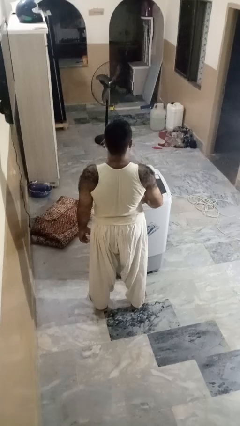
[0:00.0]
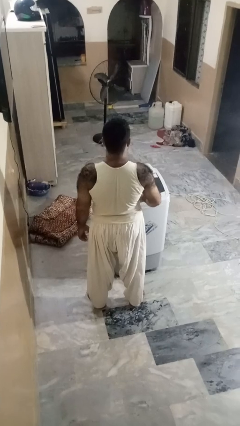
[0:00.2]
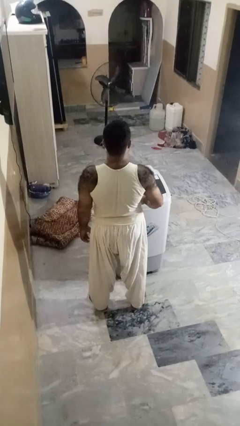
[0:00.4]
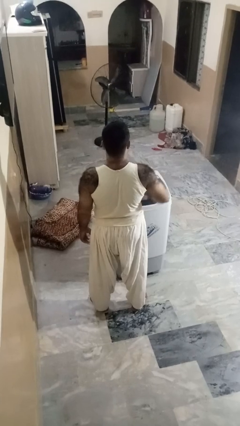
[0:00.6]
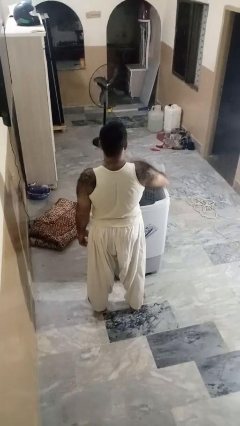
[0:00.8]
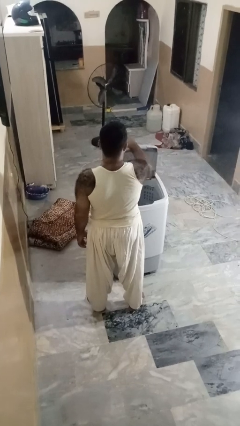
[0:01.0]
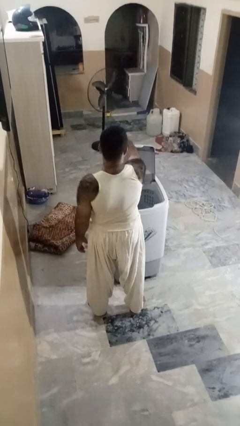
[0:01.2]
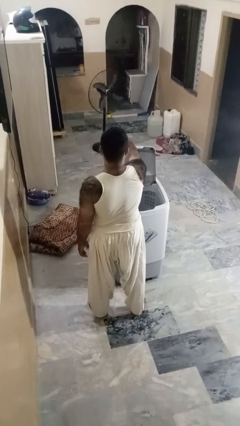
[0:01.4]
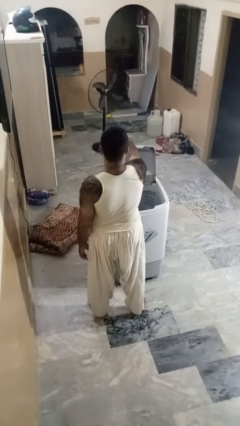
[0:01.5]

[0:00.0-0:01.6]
person opens clothes washer

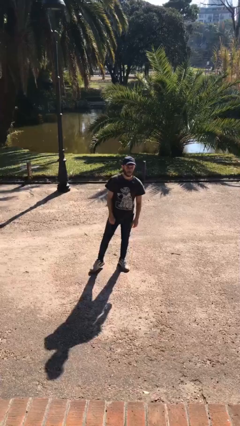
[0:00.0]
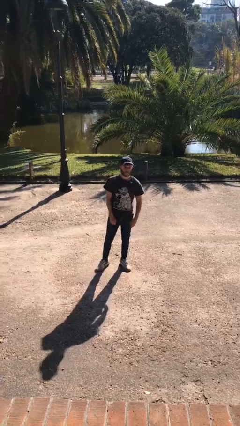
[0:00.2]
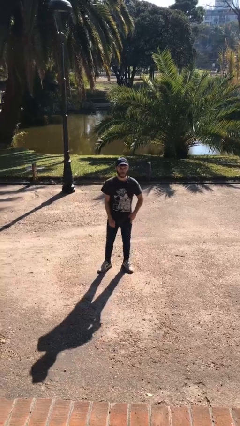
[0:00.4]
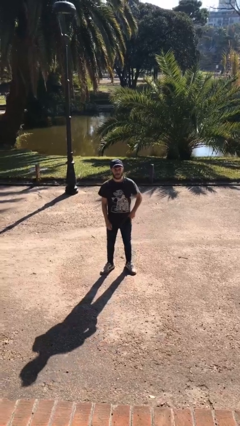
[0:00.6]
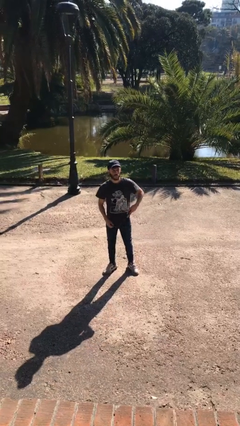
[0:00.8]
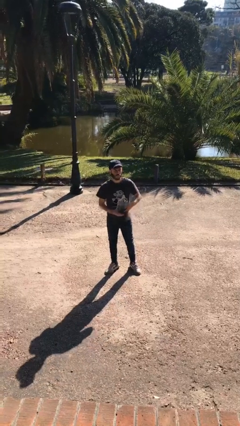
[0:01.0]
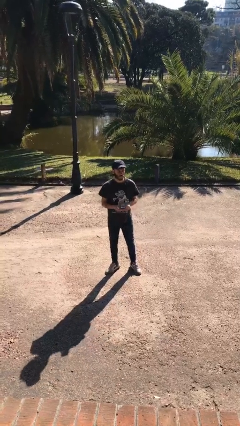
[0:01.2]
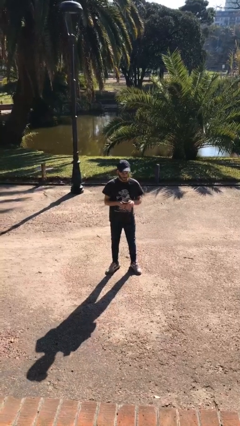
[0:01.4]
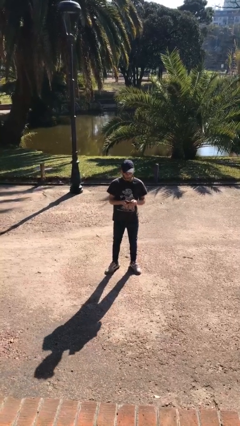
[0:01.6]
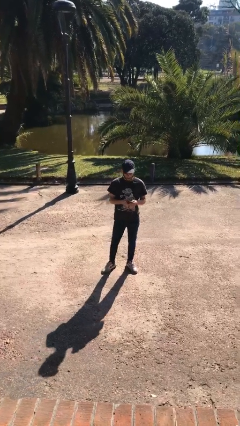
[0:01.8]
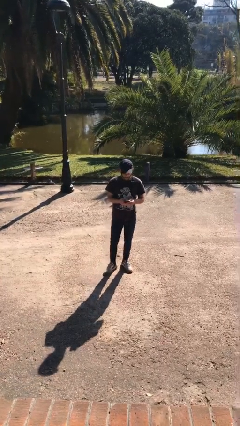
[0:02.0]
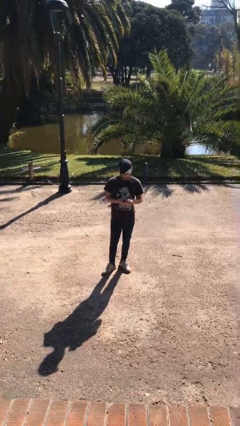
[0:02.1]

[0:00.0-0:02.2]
person takes phone from pocket

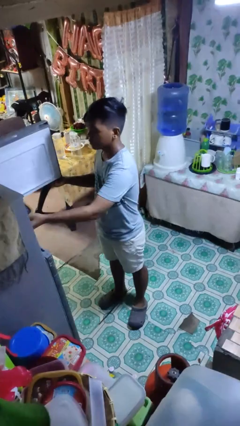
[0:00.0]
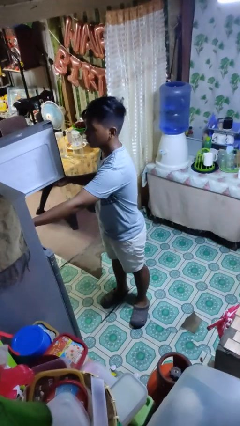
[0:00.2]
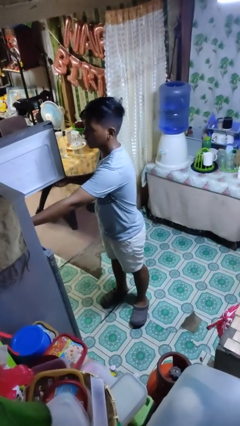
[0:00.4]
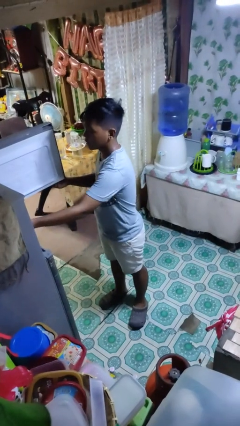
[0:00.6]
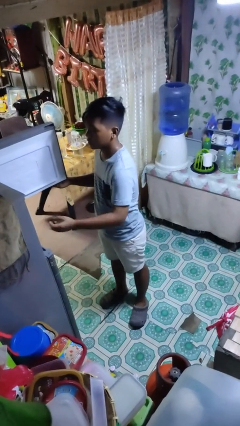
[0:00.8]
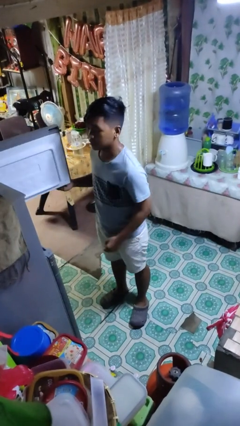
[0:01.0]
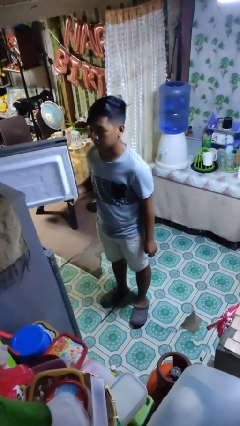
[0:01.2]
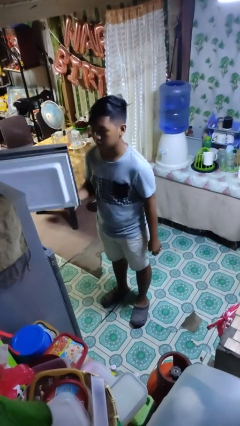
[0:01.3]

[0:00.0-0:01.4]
person puts object into refrigerator

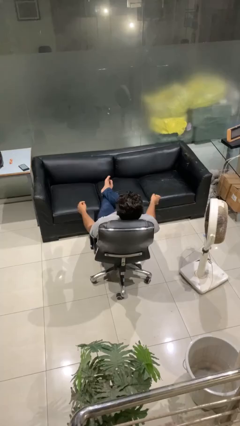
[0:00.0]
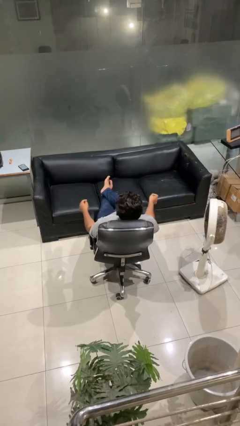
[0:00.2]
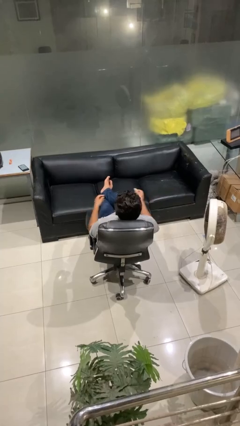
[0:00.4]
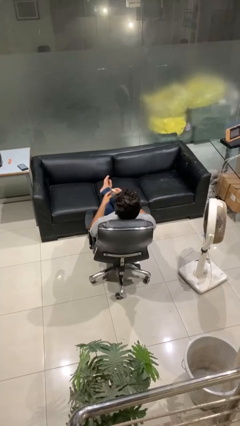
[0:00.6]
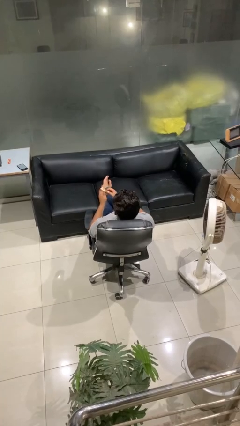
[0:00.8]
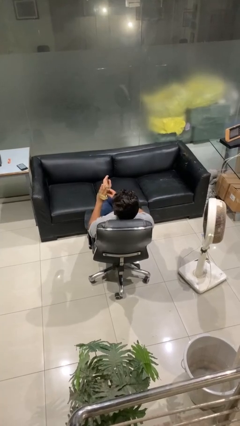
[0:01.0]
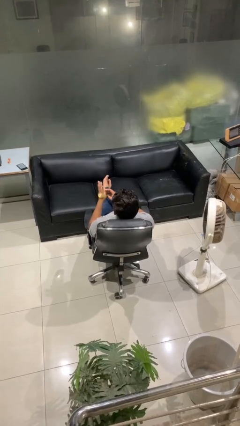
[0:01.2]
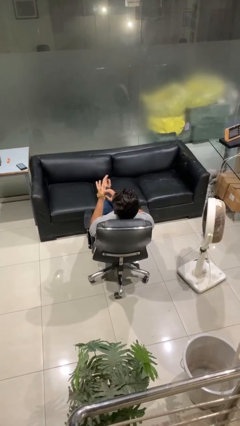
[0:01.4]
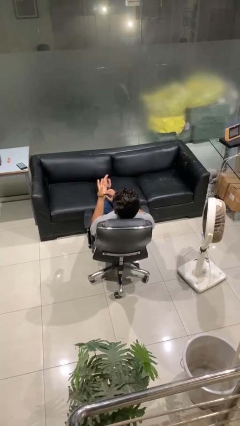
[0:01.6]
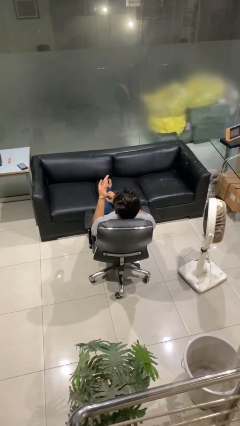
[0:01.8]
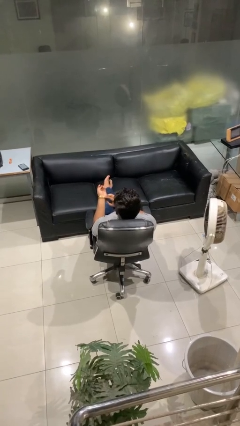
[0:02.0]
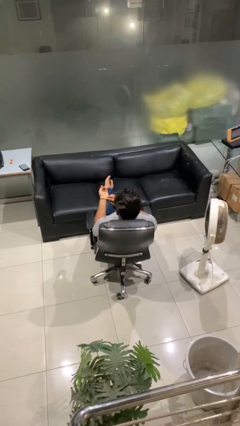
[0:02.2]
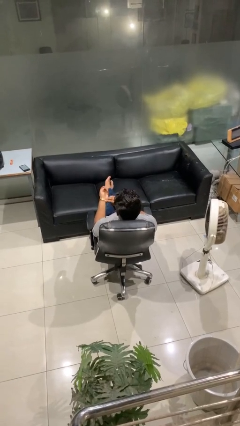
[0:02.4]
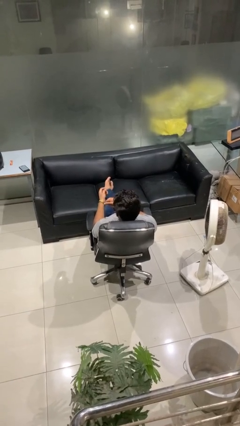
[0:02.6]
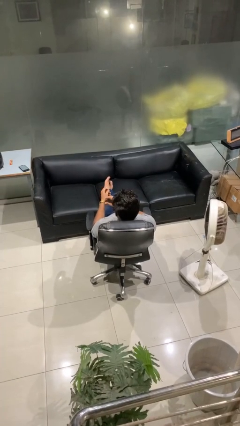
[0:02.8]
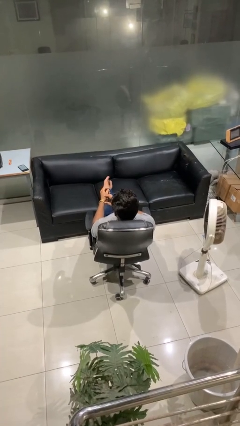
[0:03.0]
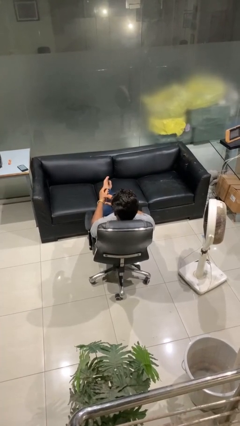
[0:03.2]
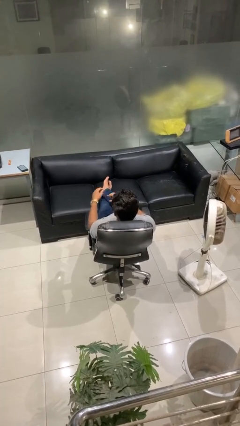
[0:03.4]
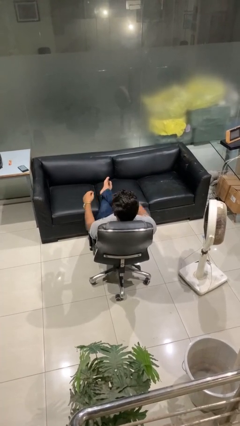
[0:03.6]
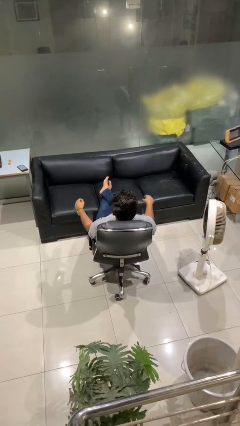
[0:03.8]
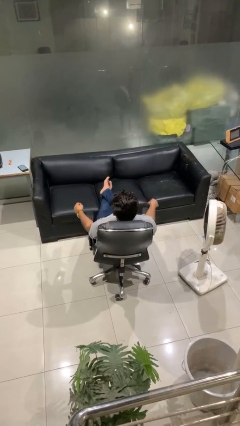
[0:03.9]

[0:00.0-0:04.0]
person puts on wristwatch

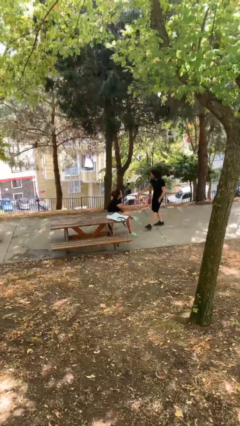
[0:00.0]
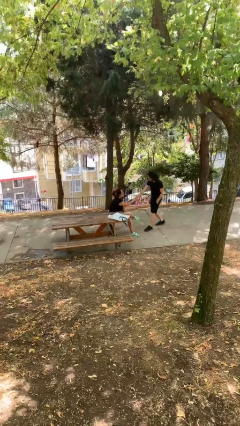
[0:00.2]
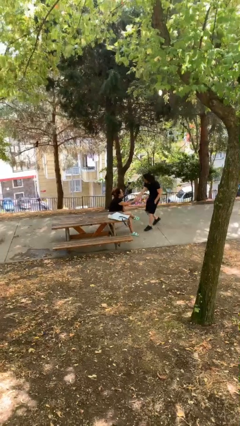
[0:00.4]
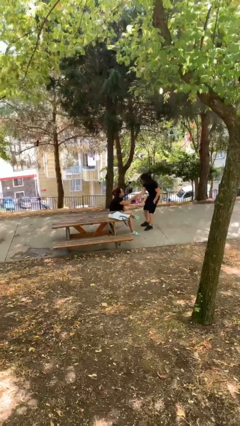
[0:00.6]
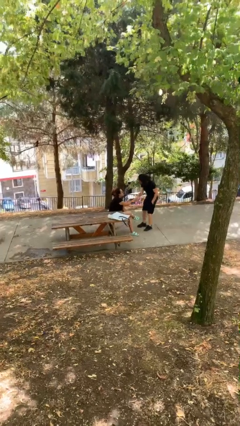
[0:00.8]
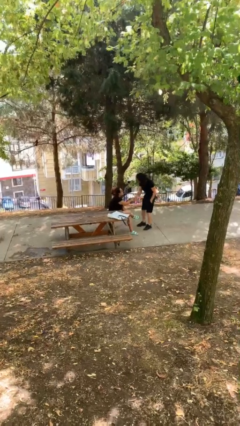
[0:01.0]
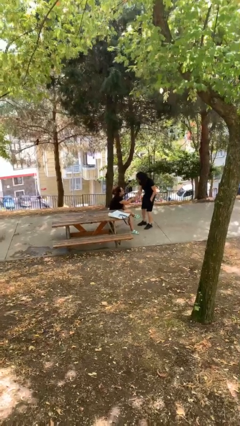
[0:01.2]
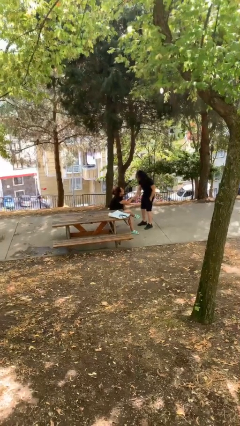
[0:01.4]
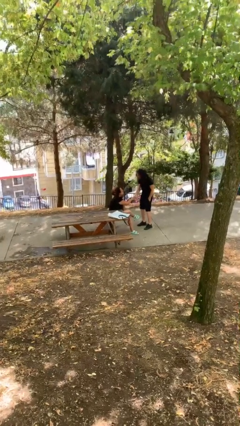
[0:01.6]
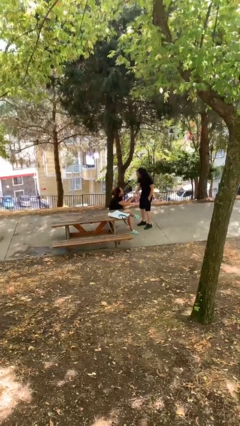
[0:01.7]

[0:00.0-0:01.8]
person shakes hand

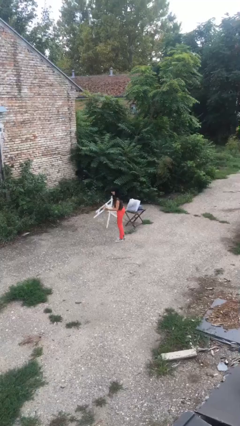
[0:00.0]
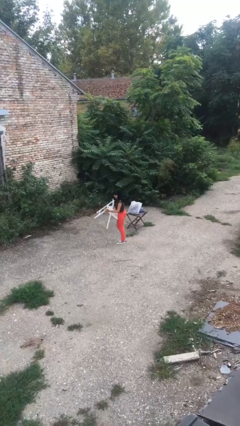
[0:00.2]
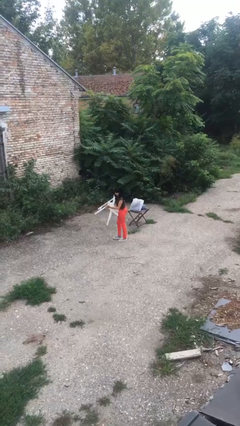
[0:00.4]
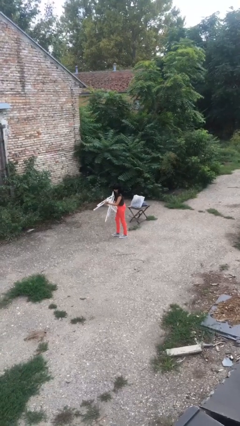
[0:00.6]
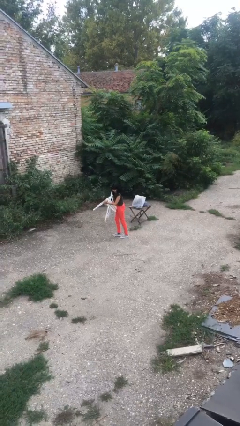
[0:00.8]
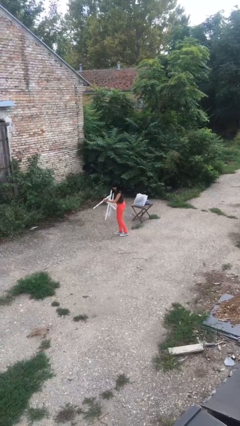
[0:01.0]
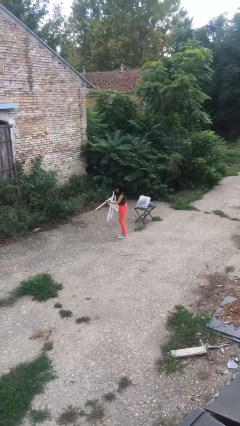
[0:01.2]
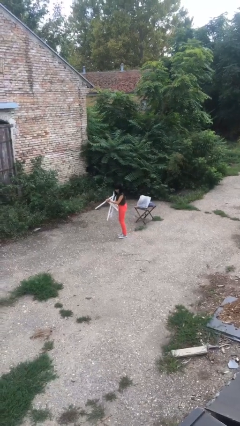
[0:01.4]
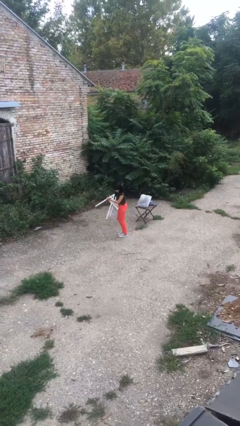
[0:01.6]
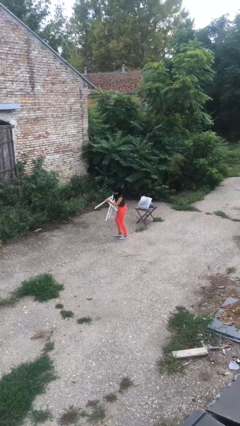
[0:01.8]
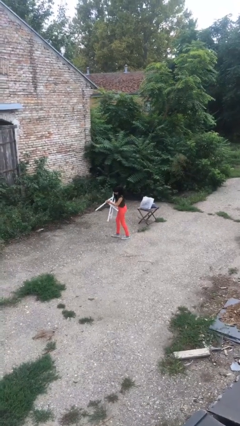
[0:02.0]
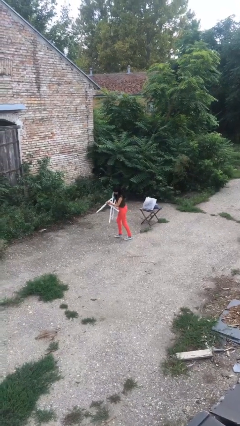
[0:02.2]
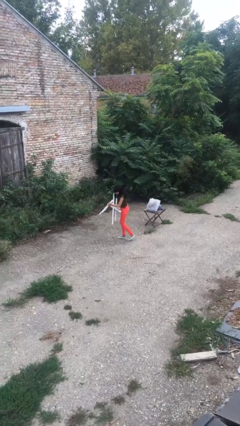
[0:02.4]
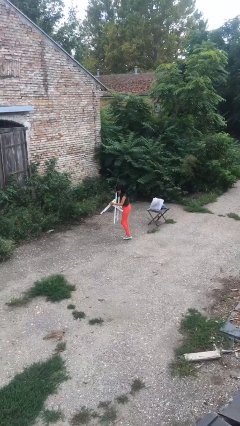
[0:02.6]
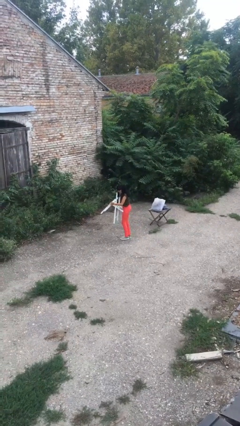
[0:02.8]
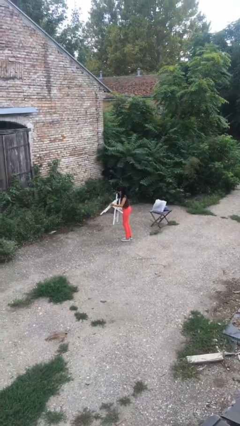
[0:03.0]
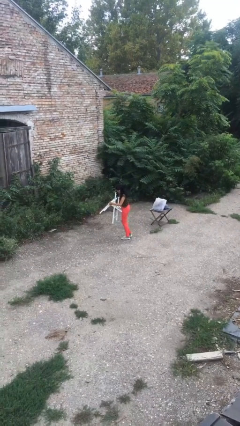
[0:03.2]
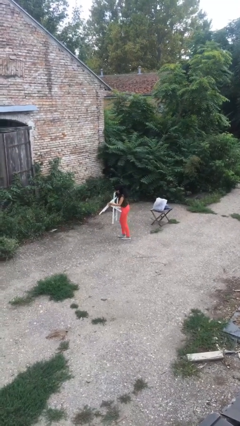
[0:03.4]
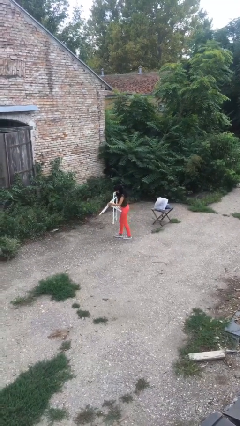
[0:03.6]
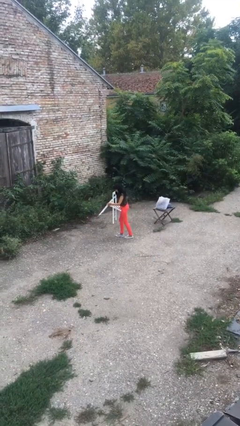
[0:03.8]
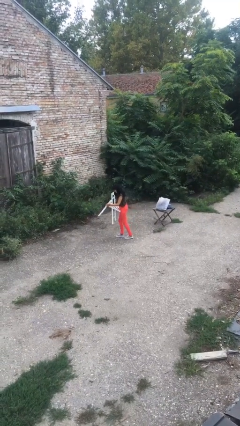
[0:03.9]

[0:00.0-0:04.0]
person carries heavy object

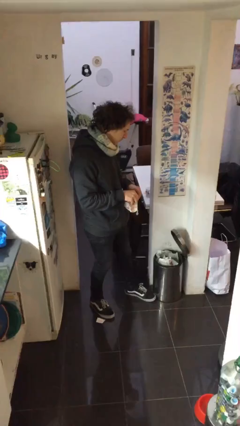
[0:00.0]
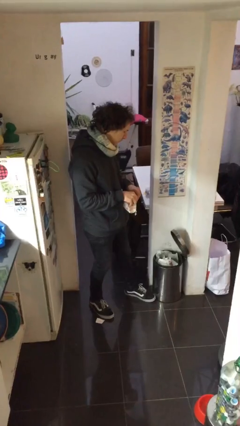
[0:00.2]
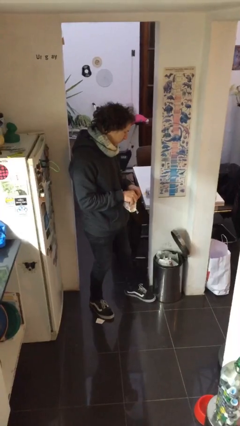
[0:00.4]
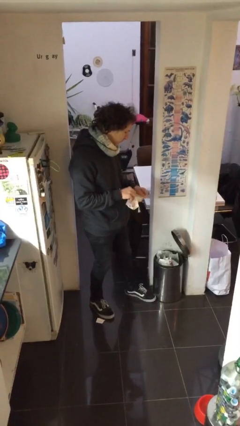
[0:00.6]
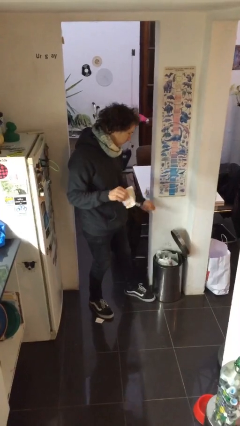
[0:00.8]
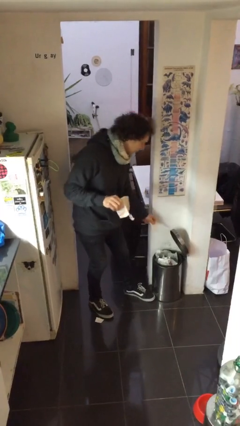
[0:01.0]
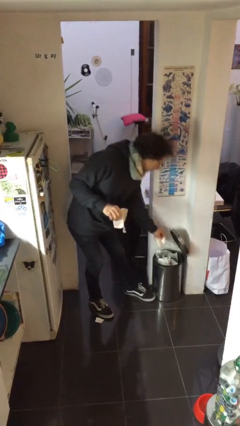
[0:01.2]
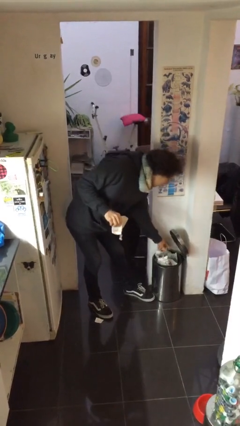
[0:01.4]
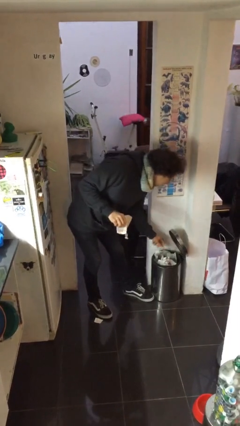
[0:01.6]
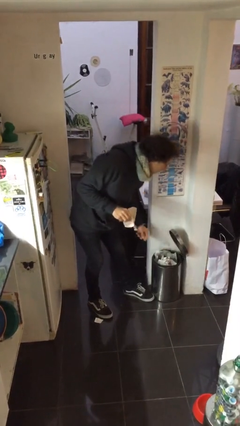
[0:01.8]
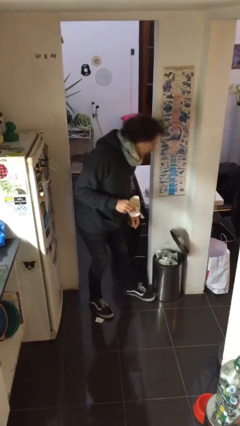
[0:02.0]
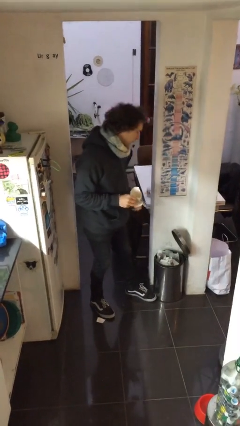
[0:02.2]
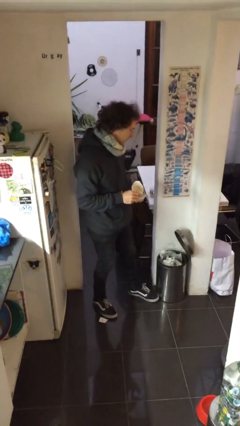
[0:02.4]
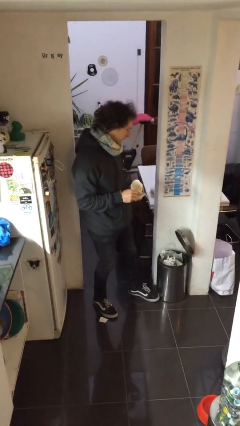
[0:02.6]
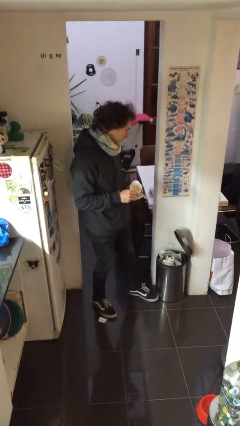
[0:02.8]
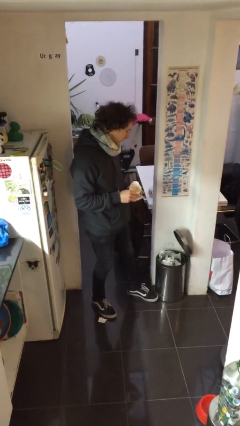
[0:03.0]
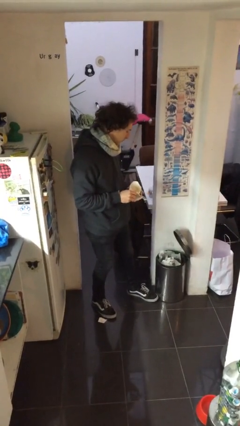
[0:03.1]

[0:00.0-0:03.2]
person discards trash
